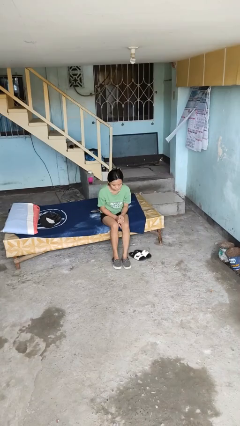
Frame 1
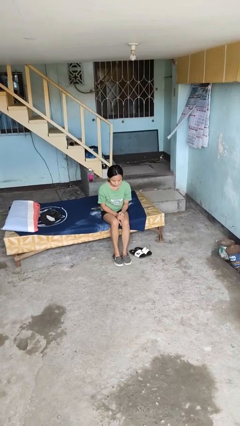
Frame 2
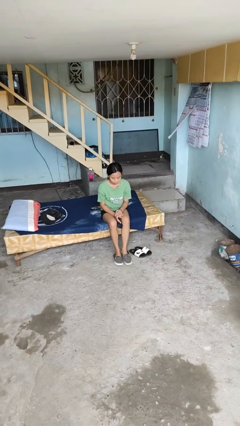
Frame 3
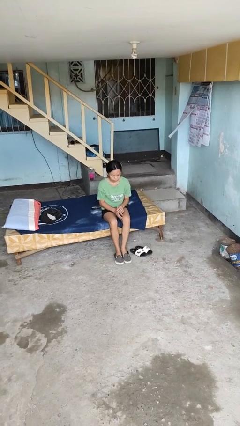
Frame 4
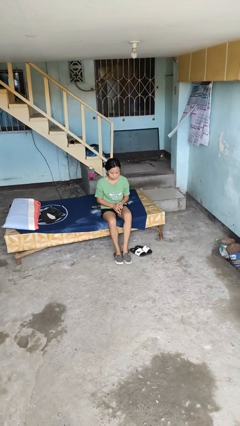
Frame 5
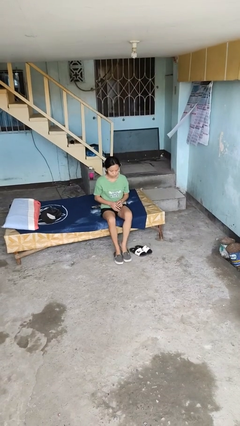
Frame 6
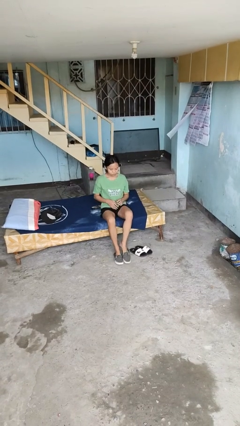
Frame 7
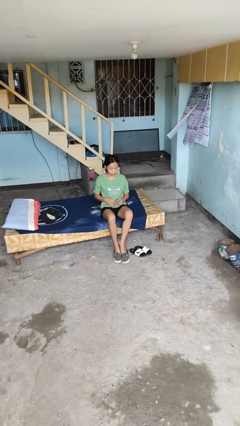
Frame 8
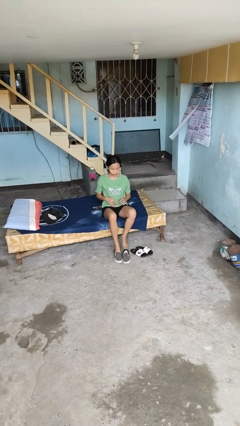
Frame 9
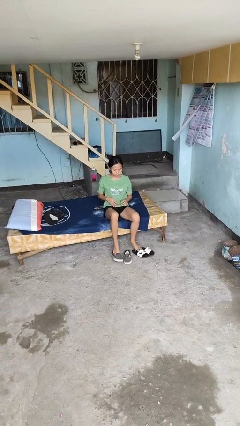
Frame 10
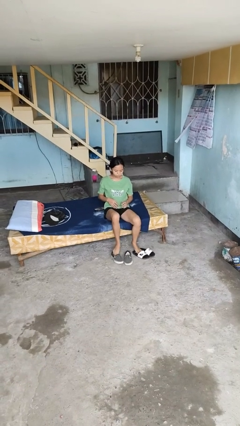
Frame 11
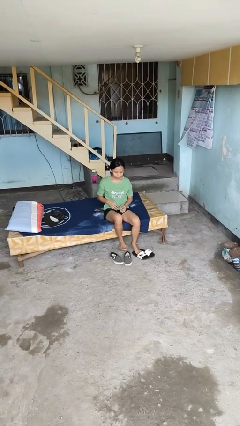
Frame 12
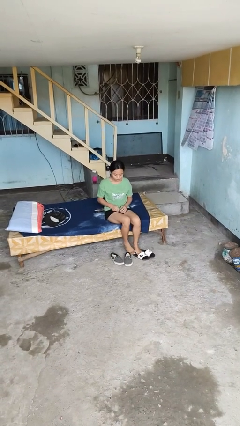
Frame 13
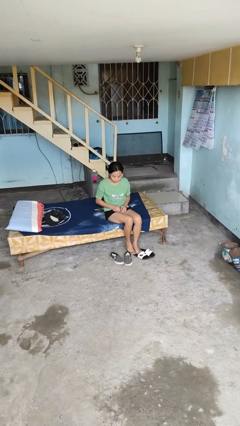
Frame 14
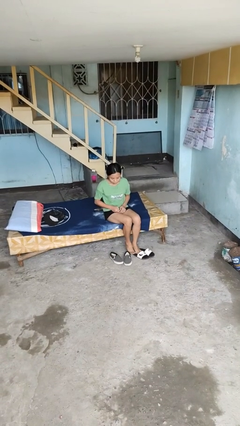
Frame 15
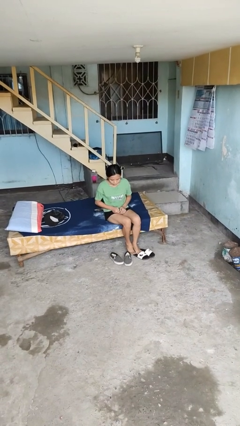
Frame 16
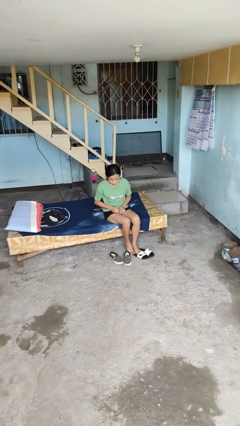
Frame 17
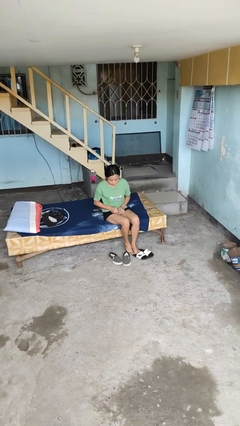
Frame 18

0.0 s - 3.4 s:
person takes off shoes

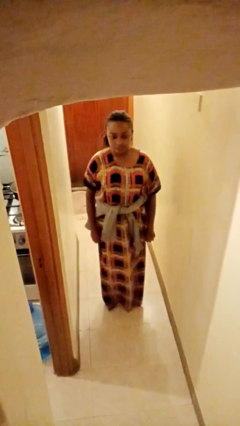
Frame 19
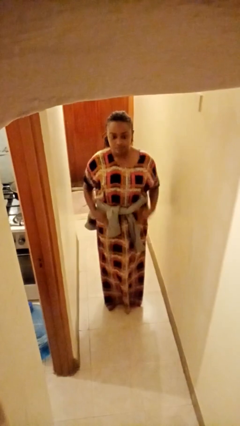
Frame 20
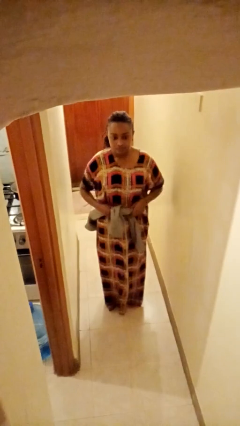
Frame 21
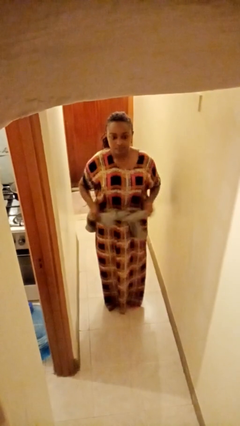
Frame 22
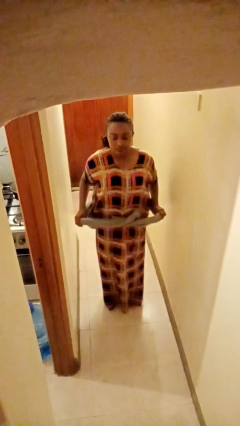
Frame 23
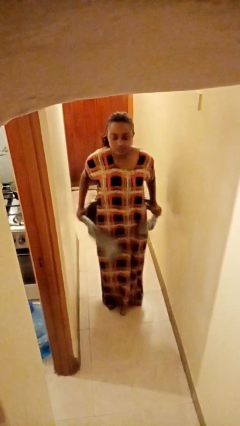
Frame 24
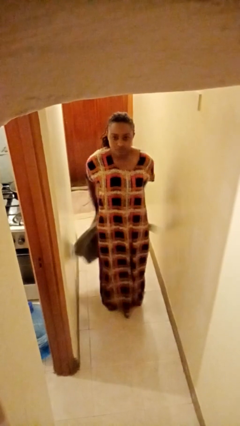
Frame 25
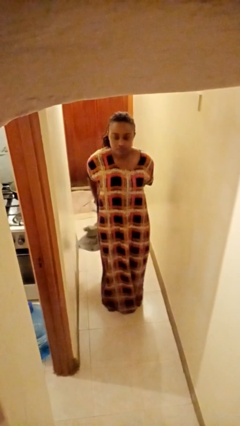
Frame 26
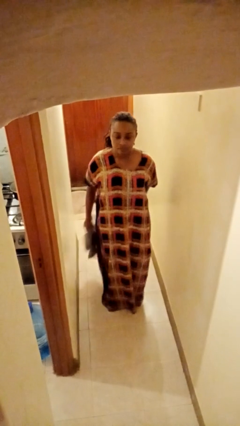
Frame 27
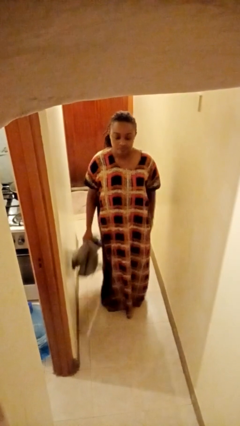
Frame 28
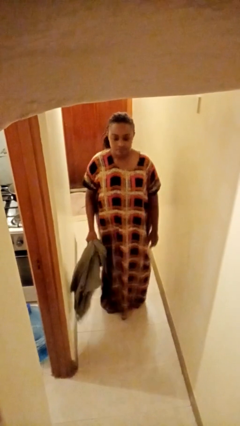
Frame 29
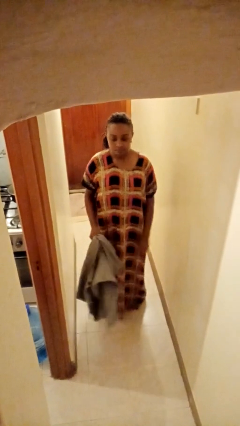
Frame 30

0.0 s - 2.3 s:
person unties jacket around waist

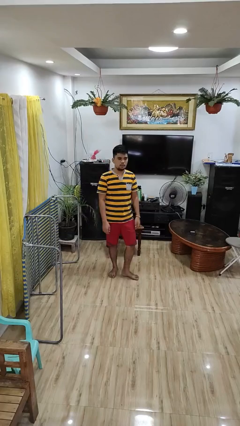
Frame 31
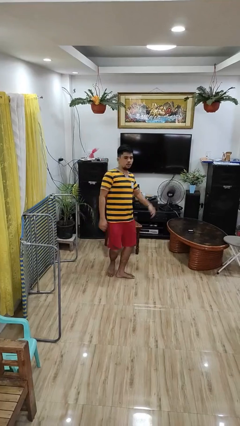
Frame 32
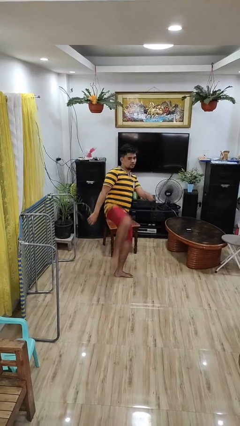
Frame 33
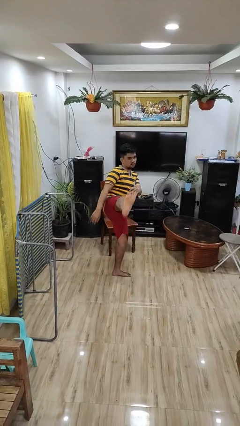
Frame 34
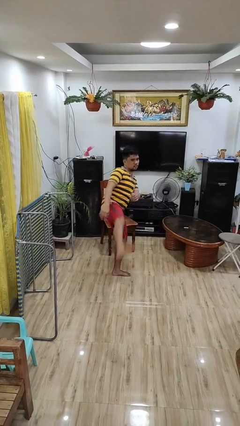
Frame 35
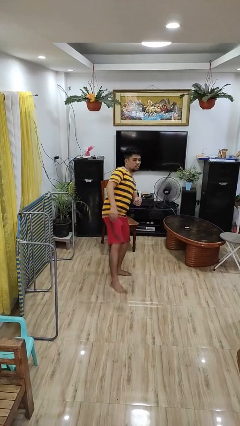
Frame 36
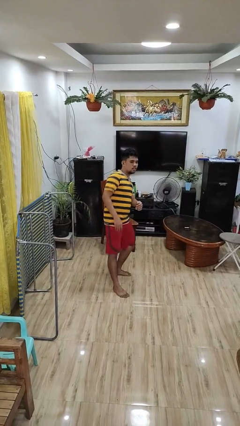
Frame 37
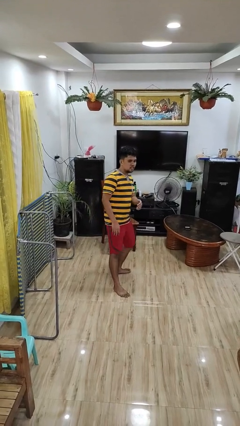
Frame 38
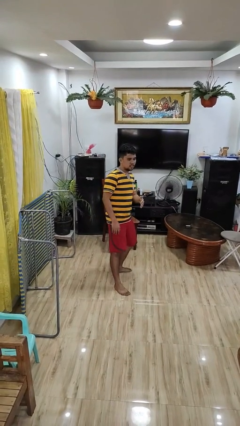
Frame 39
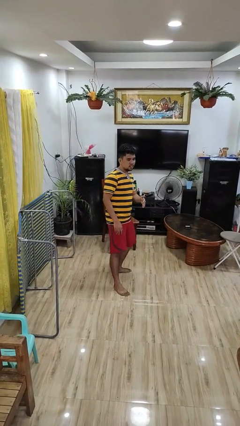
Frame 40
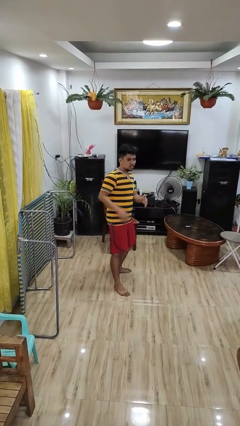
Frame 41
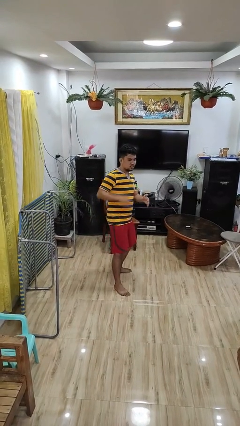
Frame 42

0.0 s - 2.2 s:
person karate kicks

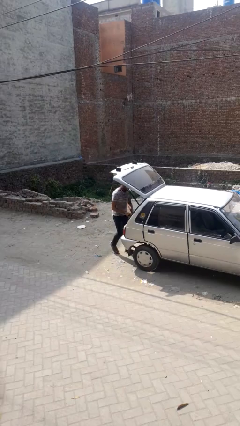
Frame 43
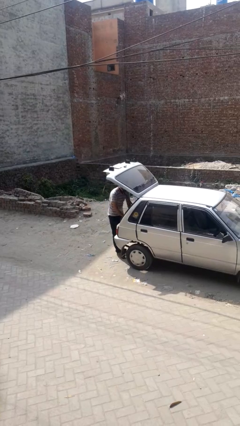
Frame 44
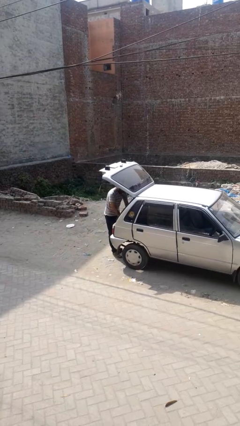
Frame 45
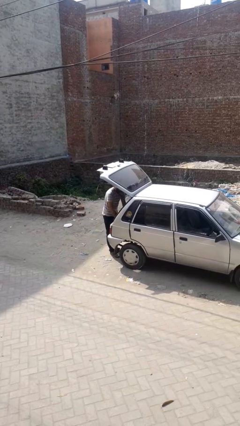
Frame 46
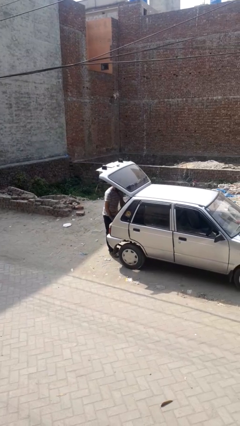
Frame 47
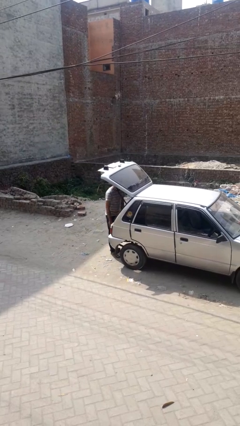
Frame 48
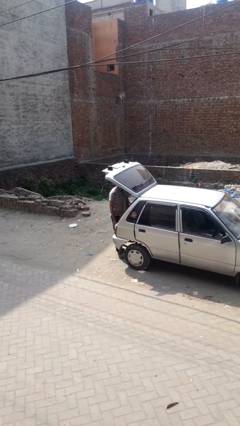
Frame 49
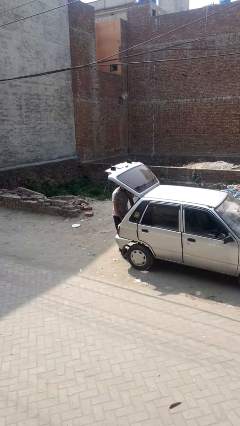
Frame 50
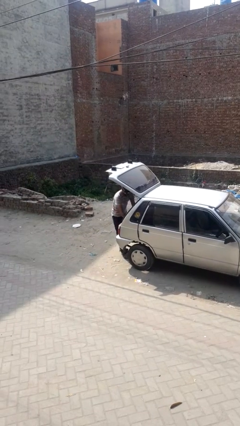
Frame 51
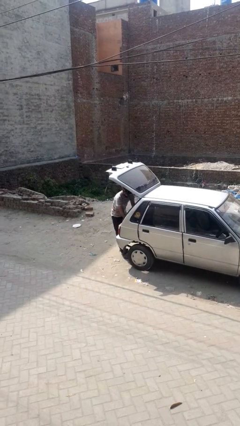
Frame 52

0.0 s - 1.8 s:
person loads car

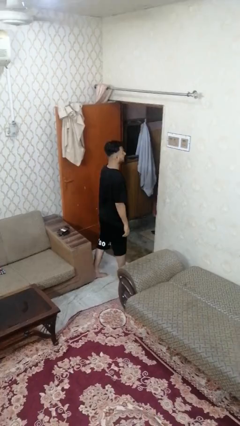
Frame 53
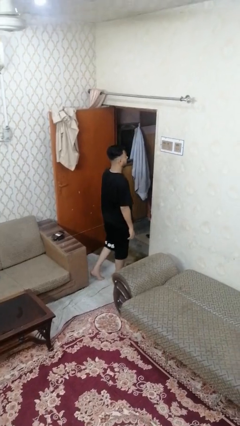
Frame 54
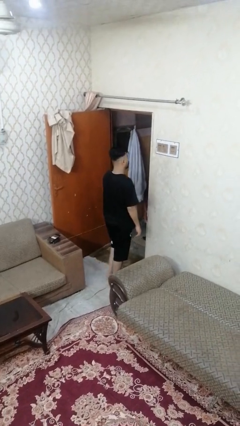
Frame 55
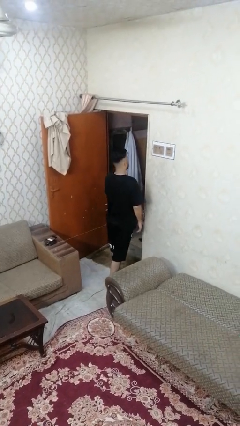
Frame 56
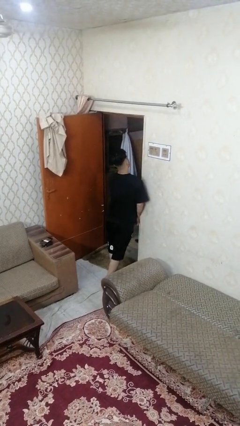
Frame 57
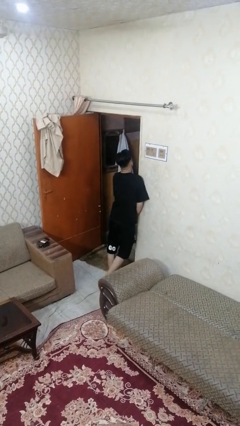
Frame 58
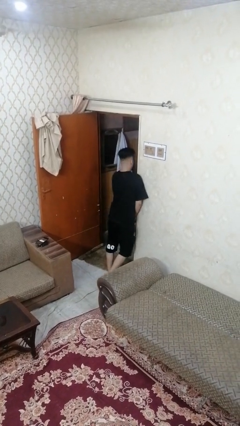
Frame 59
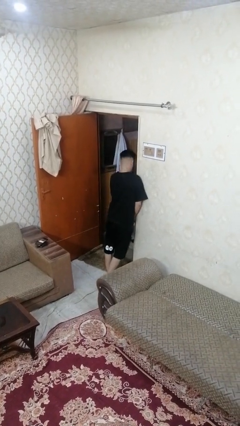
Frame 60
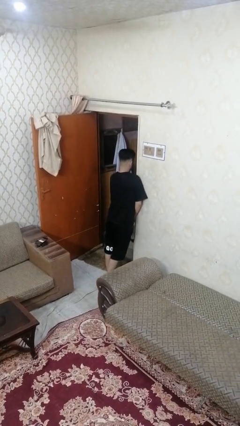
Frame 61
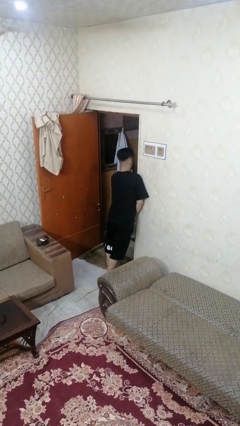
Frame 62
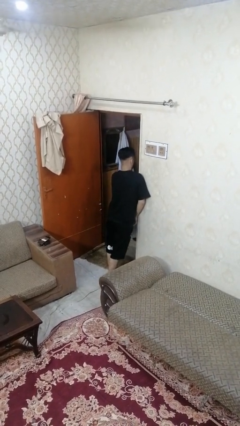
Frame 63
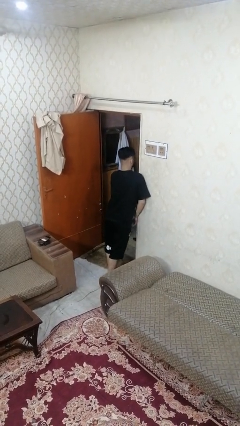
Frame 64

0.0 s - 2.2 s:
person bumps into wall

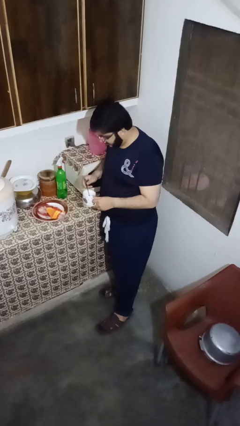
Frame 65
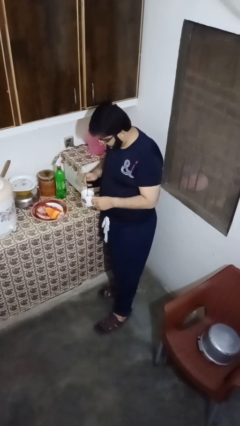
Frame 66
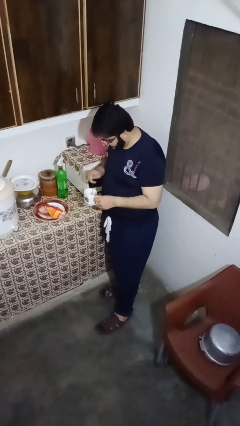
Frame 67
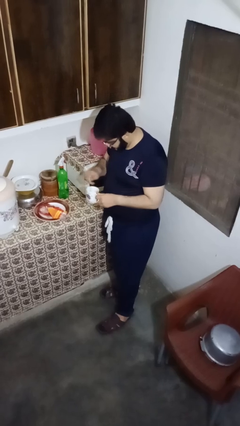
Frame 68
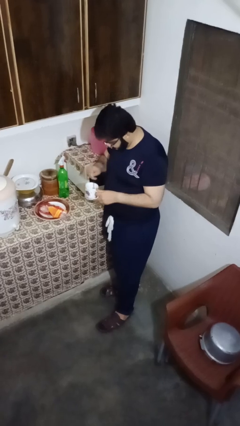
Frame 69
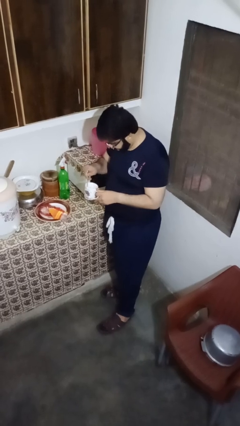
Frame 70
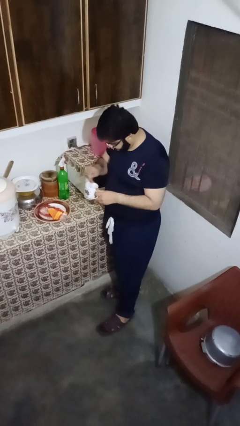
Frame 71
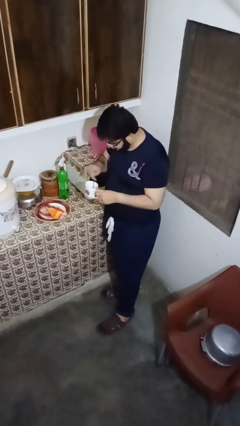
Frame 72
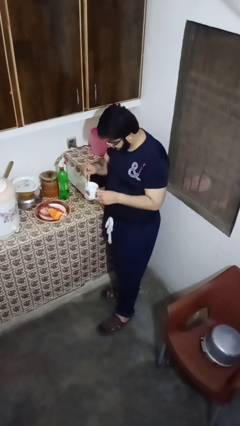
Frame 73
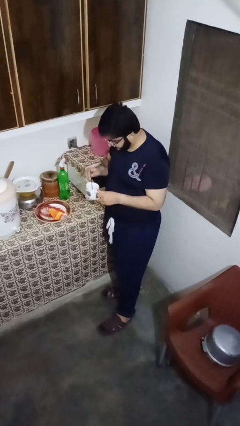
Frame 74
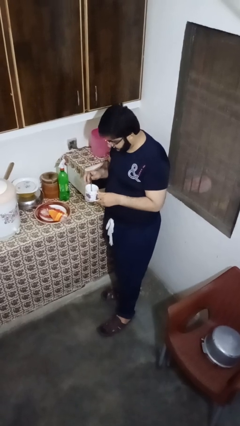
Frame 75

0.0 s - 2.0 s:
person stirs mug

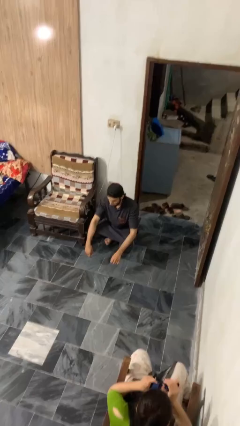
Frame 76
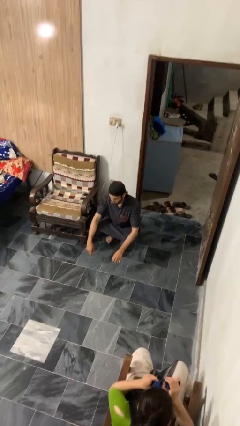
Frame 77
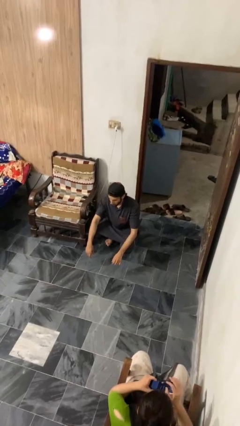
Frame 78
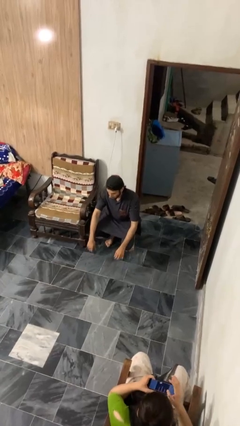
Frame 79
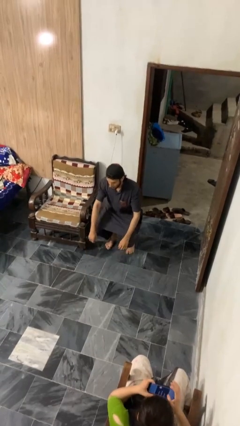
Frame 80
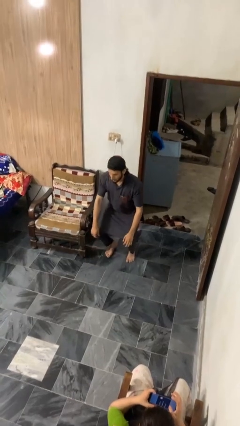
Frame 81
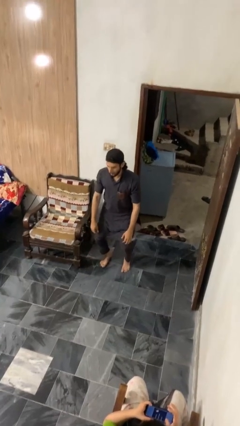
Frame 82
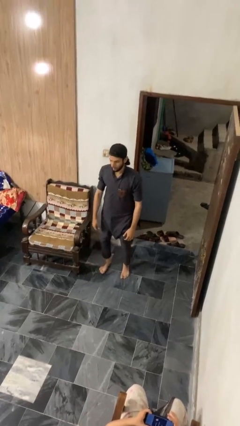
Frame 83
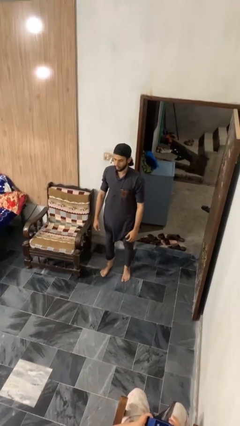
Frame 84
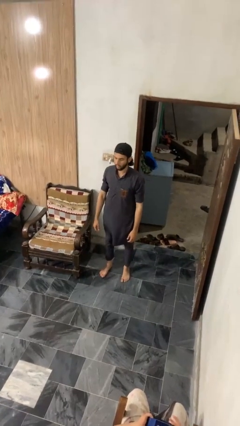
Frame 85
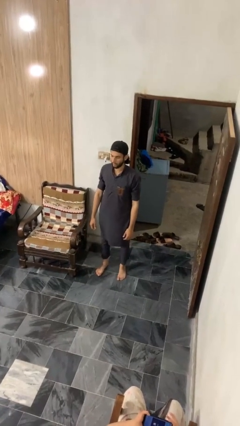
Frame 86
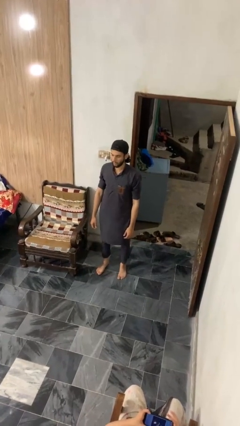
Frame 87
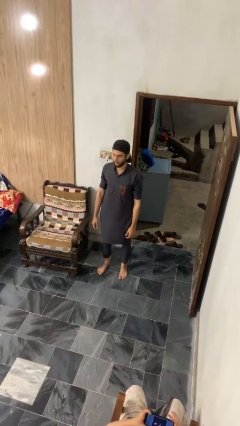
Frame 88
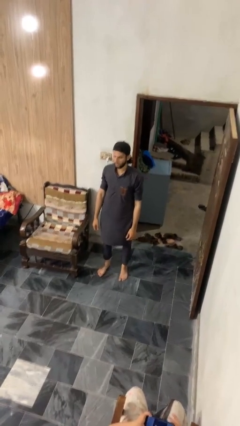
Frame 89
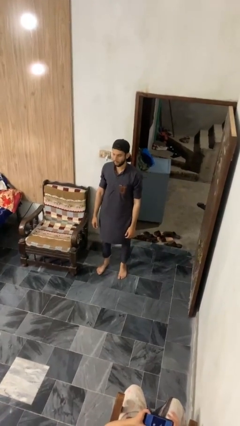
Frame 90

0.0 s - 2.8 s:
person stands up

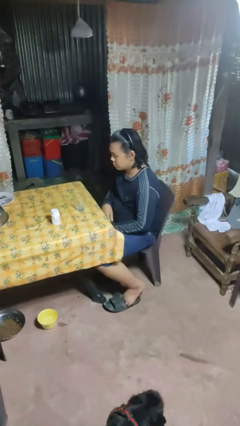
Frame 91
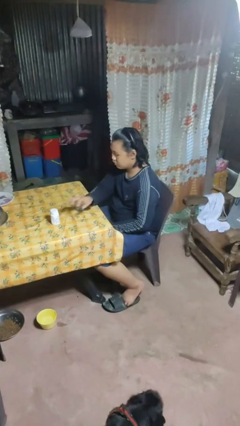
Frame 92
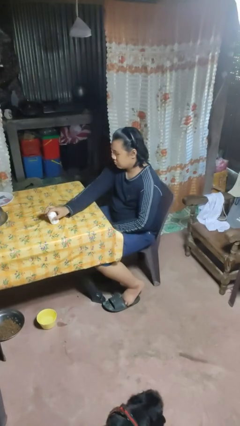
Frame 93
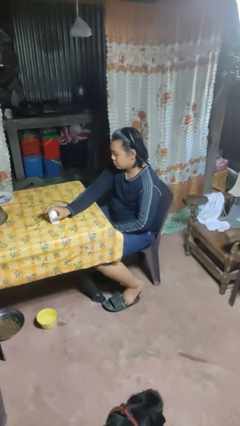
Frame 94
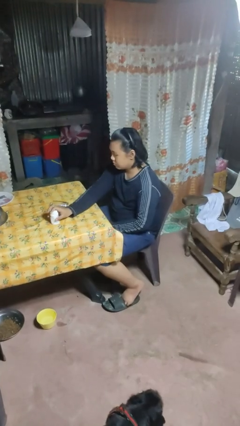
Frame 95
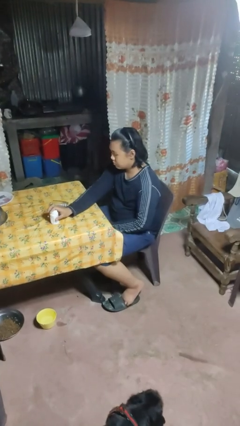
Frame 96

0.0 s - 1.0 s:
person knocks over glass
